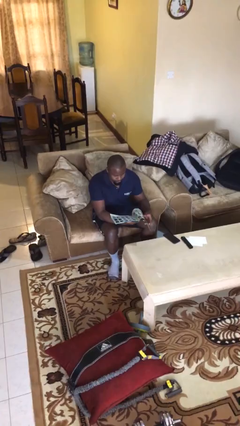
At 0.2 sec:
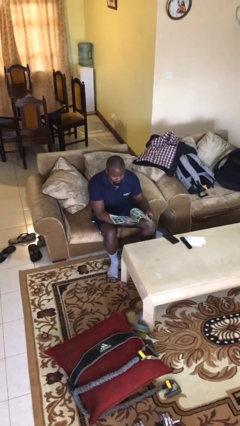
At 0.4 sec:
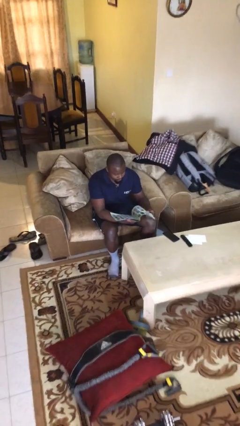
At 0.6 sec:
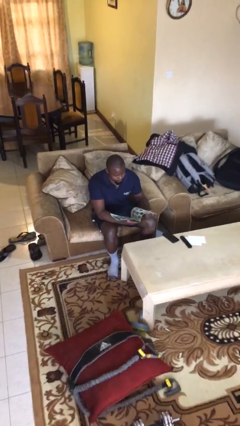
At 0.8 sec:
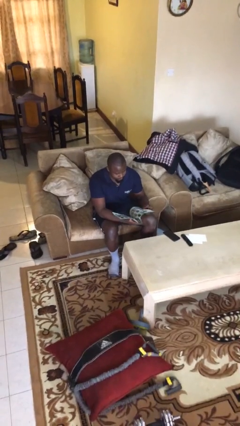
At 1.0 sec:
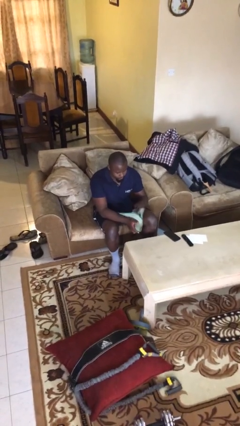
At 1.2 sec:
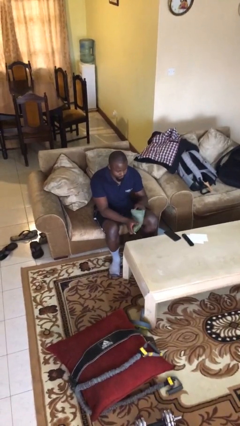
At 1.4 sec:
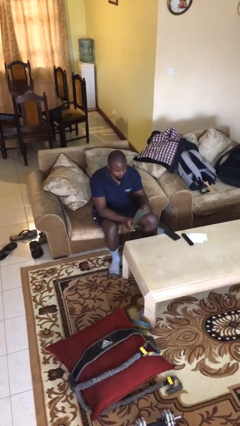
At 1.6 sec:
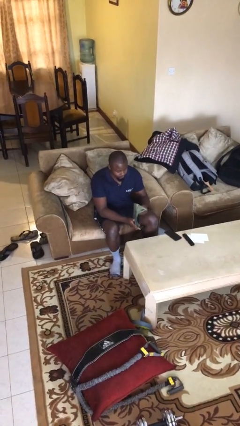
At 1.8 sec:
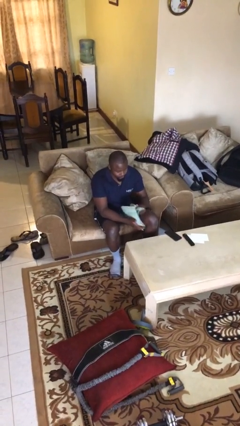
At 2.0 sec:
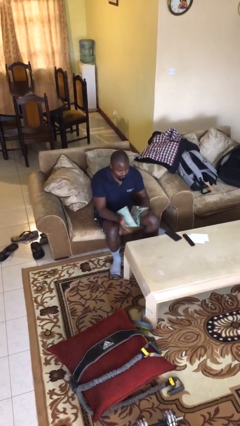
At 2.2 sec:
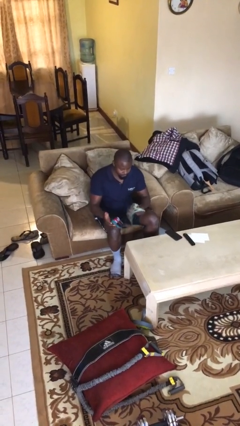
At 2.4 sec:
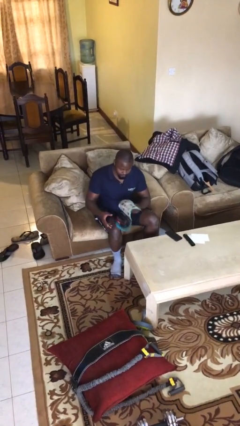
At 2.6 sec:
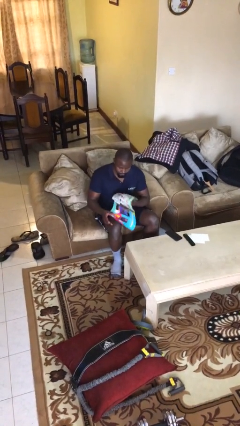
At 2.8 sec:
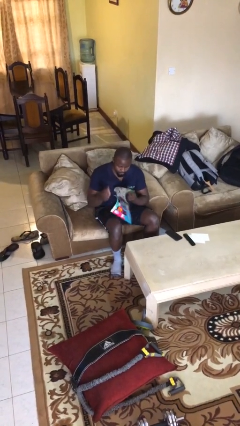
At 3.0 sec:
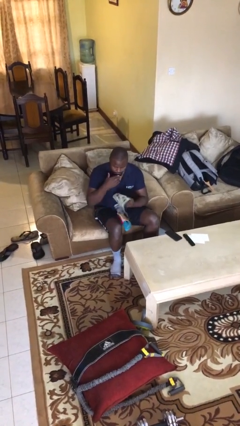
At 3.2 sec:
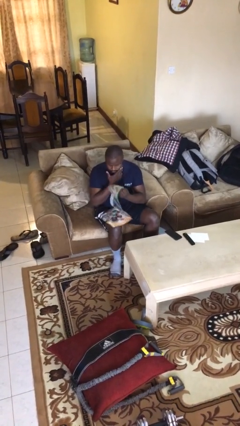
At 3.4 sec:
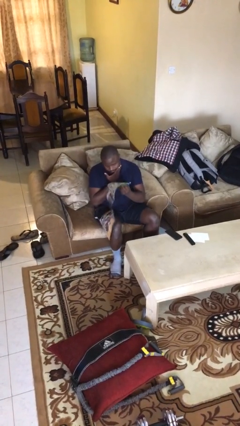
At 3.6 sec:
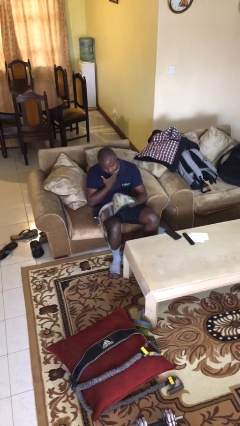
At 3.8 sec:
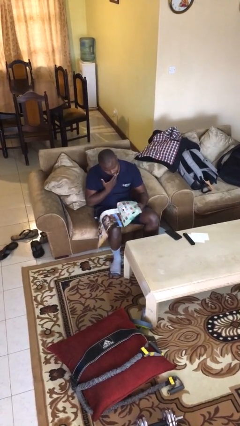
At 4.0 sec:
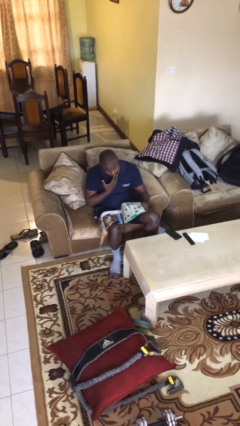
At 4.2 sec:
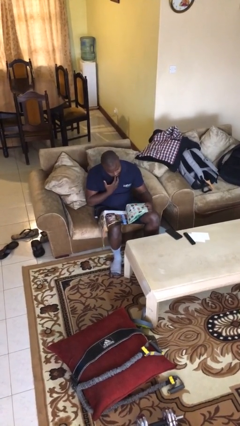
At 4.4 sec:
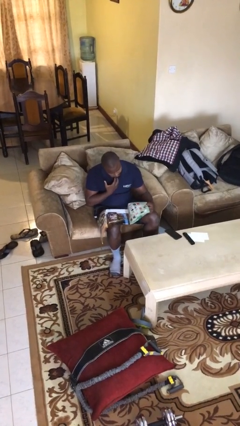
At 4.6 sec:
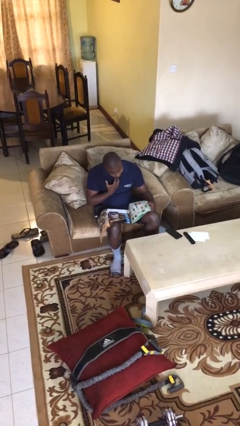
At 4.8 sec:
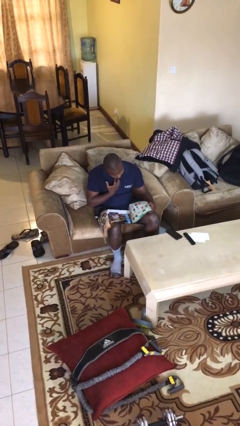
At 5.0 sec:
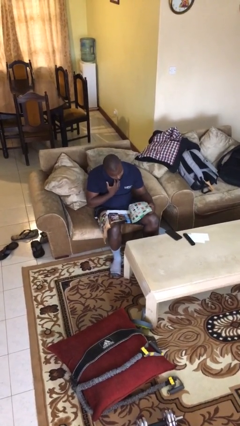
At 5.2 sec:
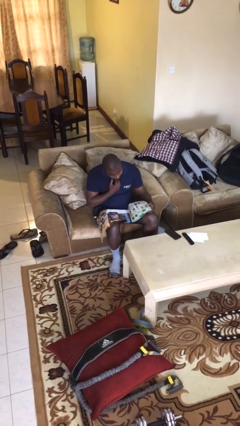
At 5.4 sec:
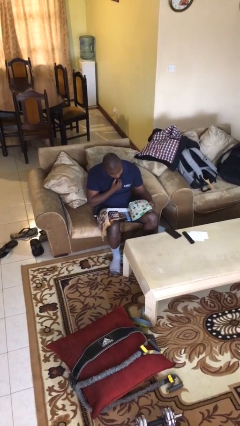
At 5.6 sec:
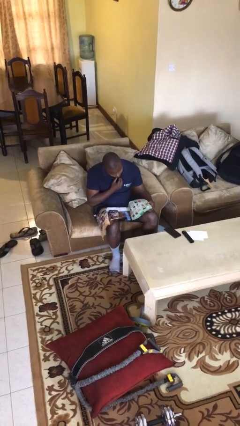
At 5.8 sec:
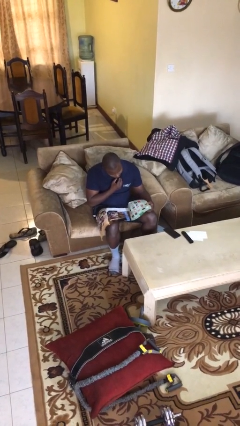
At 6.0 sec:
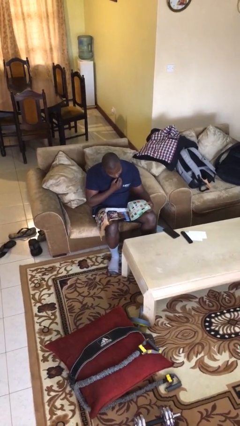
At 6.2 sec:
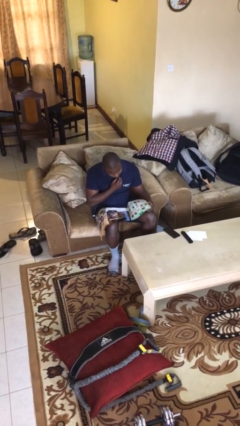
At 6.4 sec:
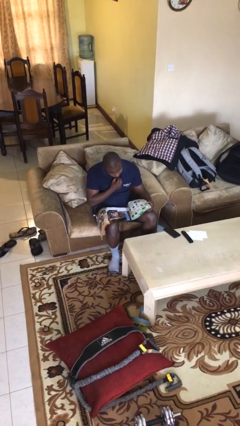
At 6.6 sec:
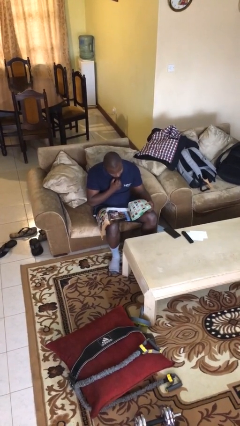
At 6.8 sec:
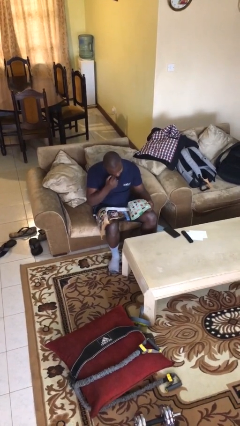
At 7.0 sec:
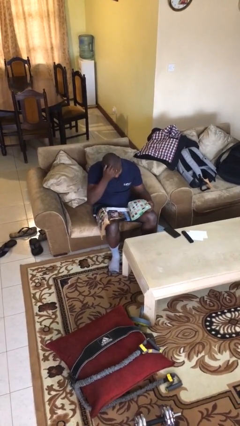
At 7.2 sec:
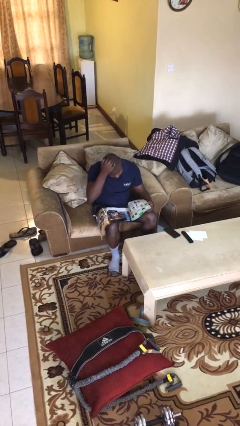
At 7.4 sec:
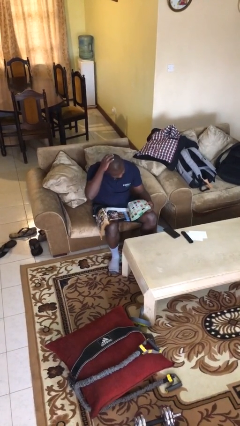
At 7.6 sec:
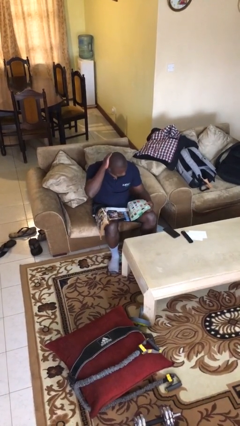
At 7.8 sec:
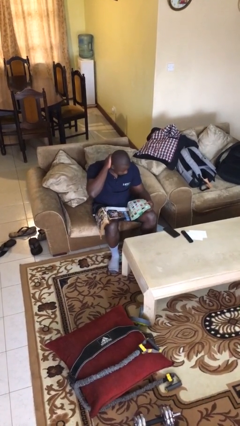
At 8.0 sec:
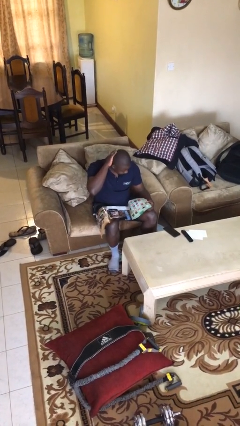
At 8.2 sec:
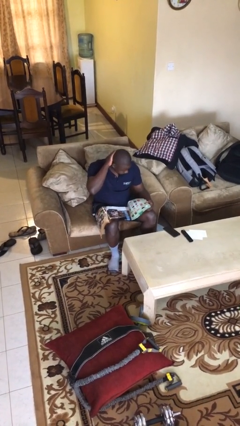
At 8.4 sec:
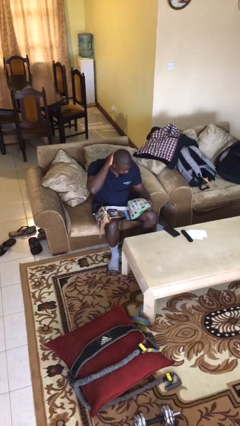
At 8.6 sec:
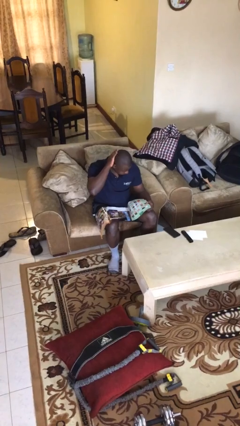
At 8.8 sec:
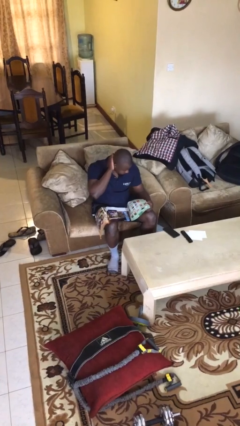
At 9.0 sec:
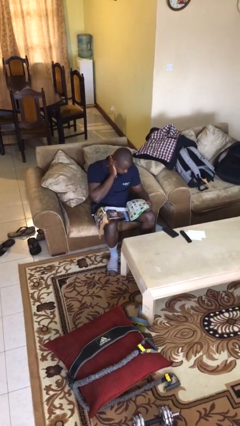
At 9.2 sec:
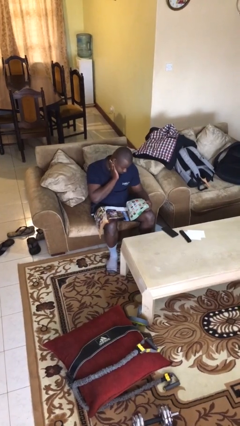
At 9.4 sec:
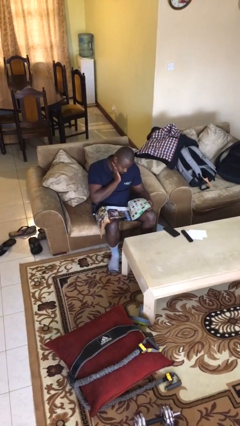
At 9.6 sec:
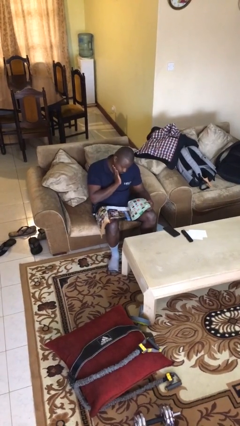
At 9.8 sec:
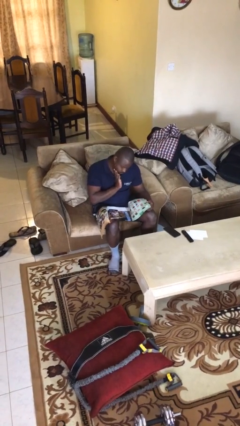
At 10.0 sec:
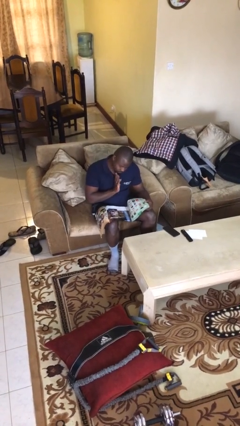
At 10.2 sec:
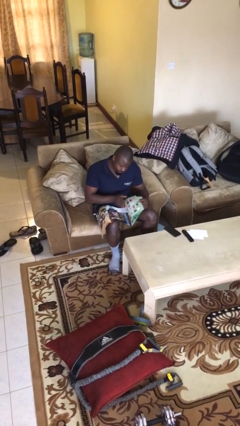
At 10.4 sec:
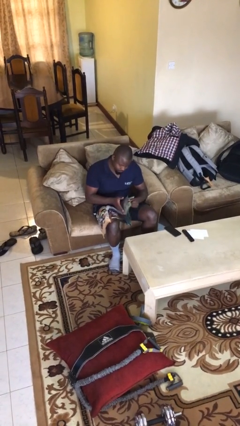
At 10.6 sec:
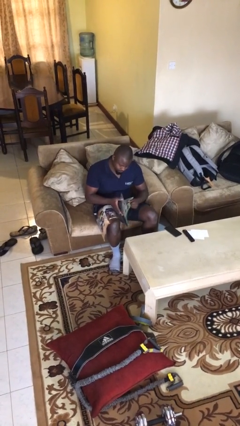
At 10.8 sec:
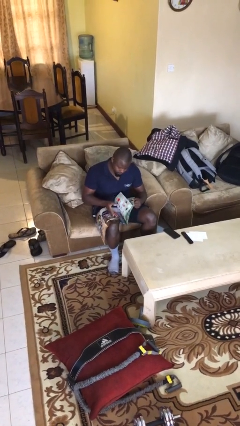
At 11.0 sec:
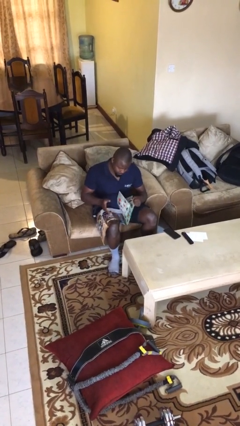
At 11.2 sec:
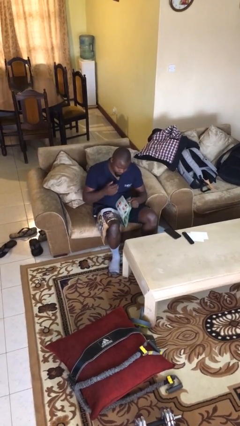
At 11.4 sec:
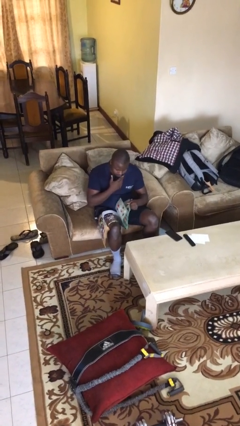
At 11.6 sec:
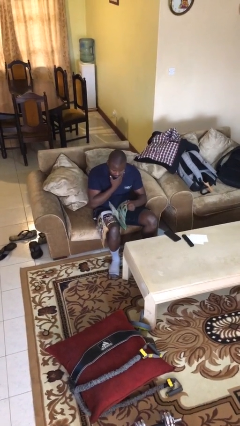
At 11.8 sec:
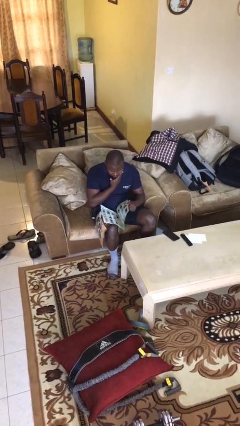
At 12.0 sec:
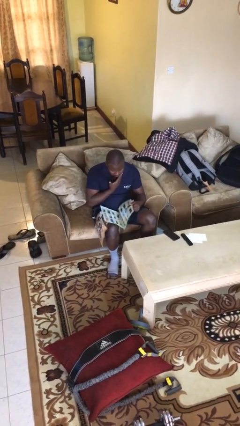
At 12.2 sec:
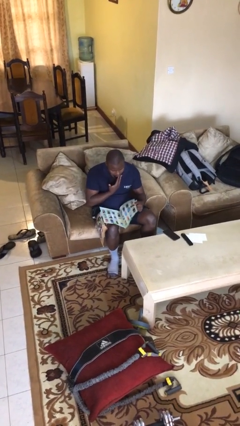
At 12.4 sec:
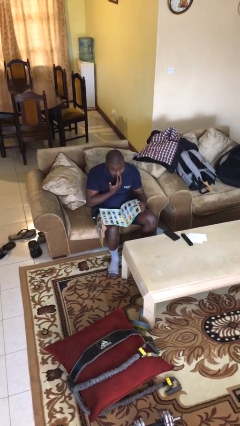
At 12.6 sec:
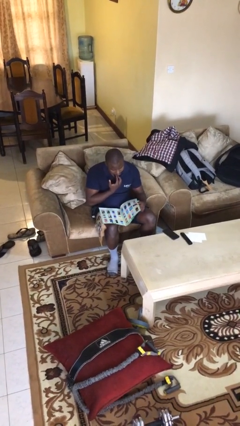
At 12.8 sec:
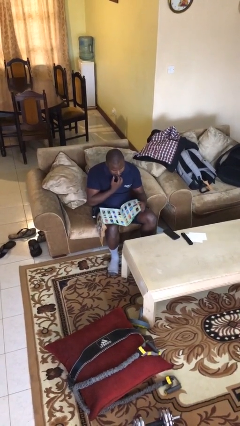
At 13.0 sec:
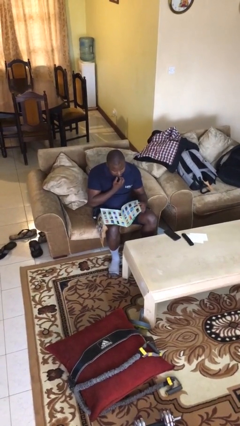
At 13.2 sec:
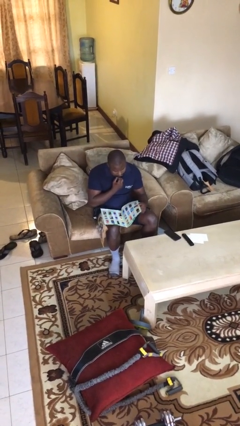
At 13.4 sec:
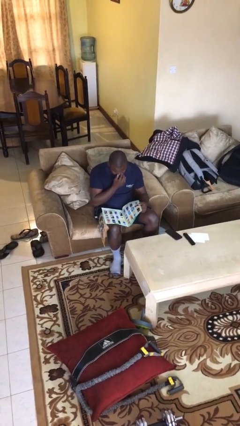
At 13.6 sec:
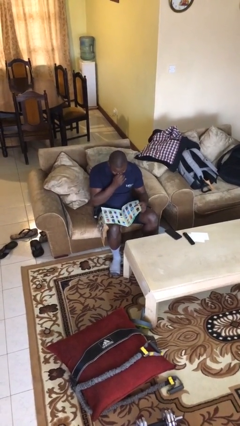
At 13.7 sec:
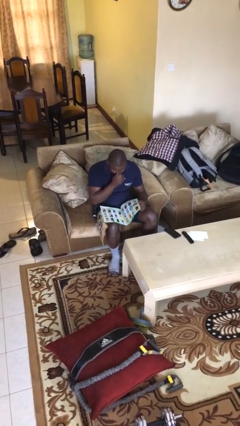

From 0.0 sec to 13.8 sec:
person reads document

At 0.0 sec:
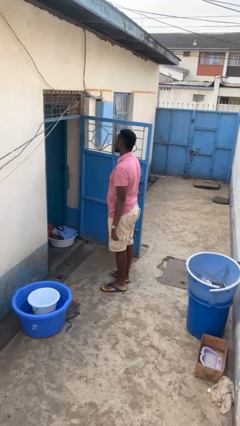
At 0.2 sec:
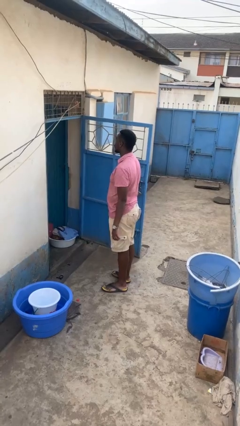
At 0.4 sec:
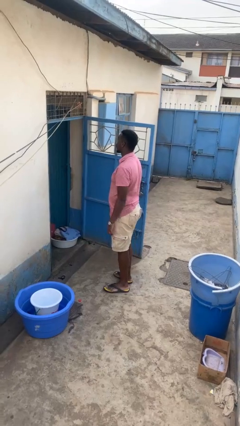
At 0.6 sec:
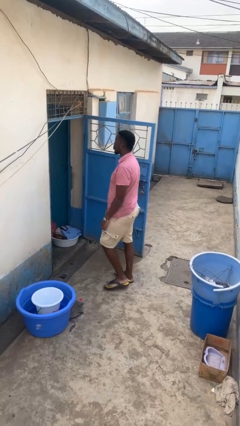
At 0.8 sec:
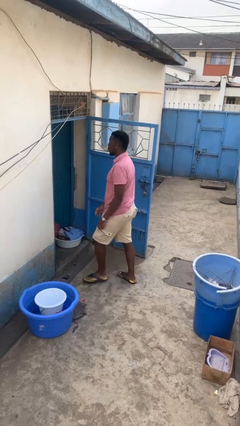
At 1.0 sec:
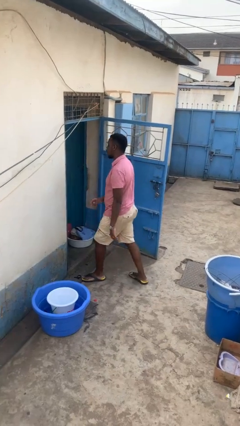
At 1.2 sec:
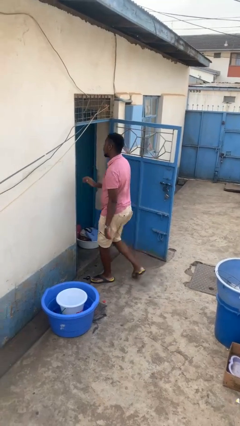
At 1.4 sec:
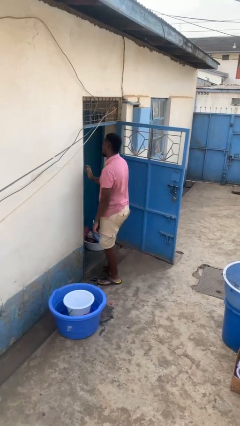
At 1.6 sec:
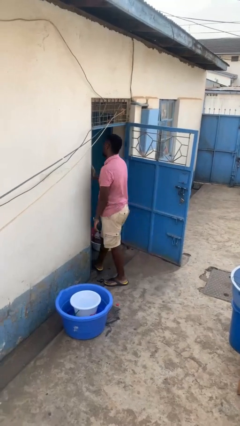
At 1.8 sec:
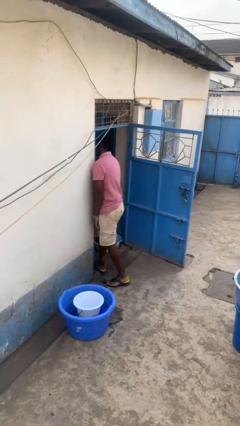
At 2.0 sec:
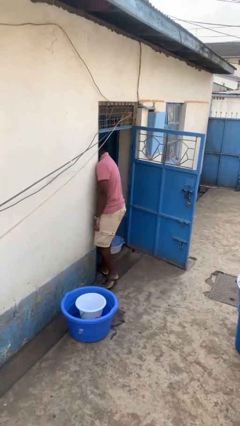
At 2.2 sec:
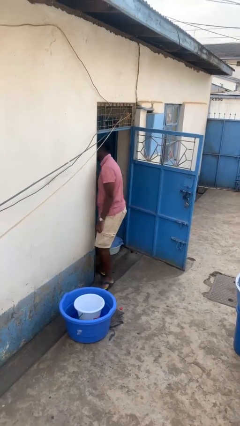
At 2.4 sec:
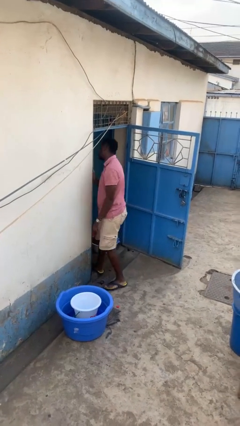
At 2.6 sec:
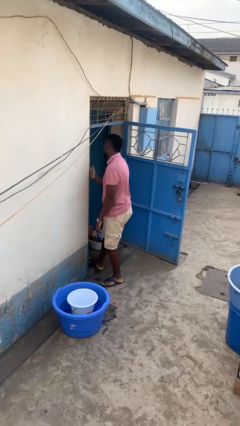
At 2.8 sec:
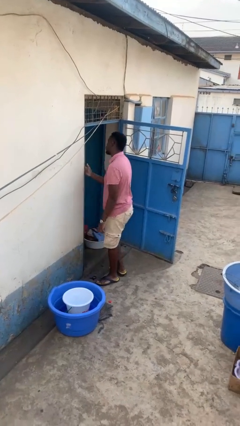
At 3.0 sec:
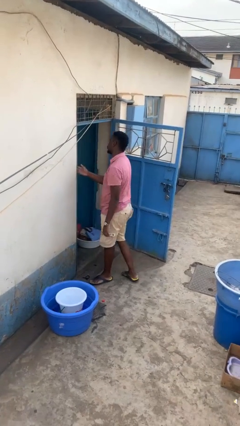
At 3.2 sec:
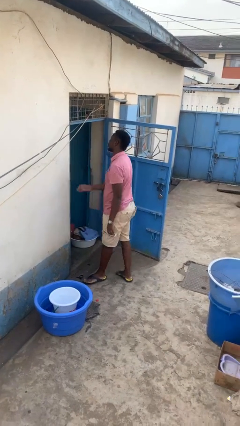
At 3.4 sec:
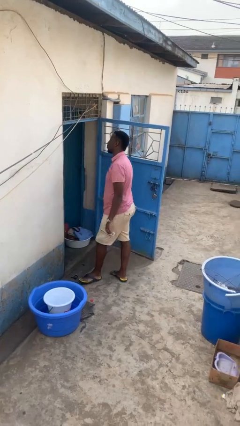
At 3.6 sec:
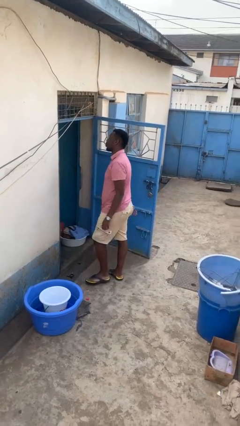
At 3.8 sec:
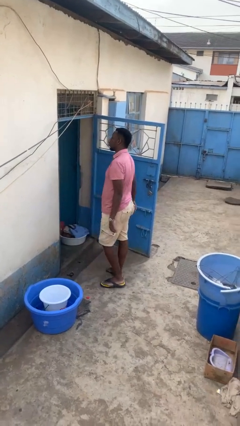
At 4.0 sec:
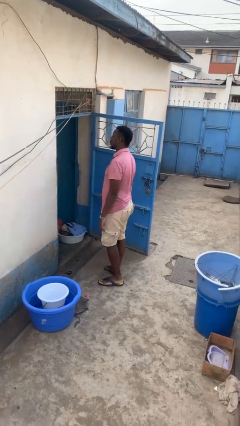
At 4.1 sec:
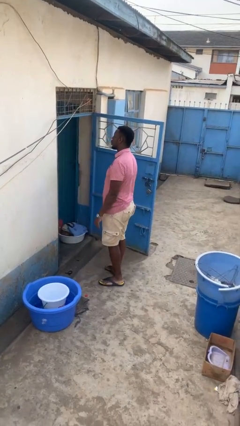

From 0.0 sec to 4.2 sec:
person bumps into wall

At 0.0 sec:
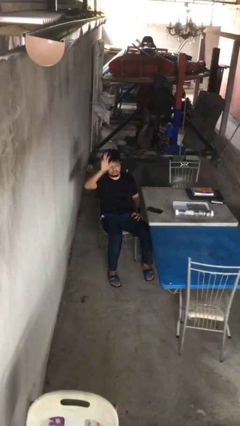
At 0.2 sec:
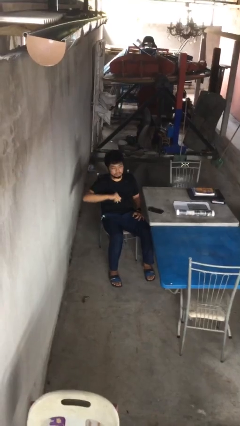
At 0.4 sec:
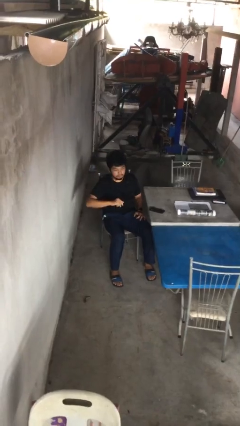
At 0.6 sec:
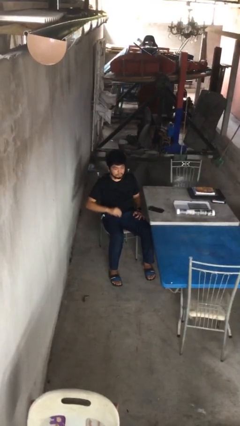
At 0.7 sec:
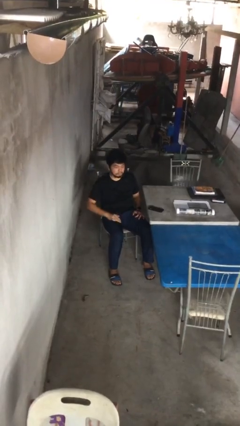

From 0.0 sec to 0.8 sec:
person gestures swipe down
